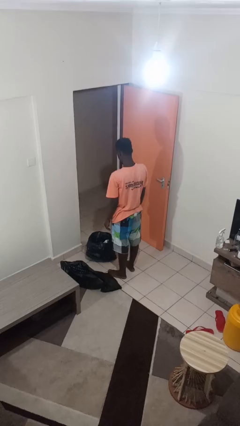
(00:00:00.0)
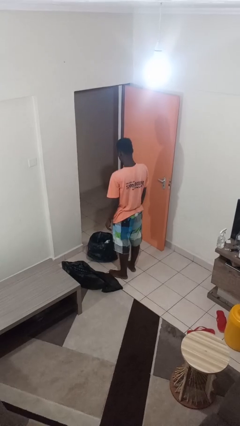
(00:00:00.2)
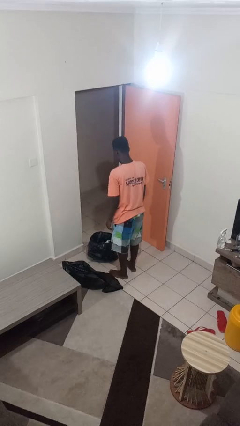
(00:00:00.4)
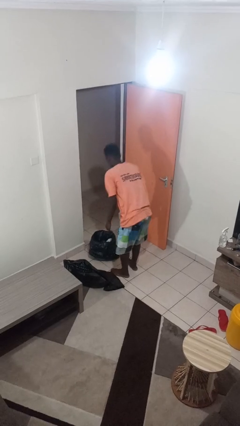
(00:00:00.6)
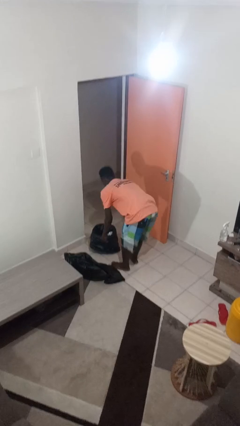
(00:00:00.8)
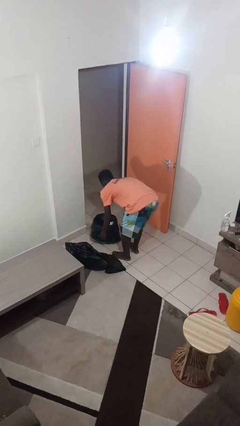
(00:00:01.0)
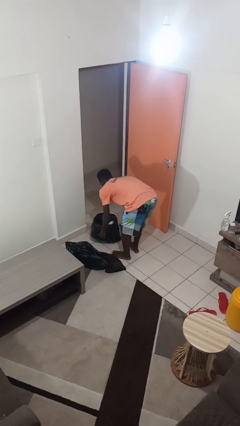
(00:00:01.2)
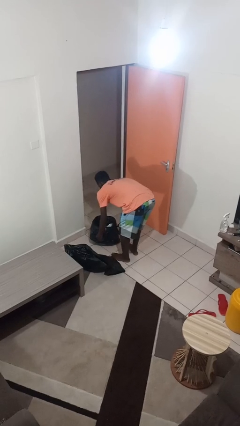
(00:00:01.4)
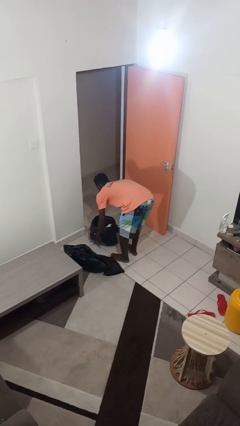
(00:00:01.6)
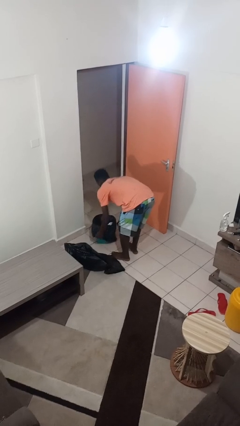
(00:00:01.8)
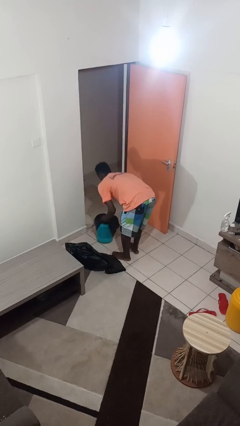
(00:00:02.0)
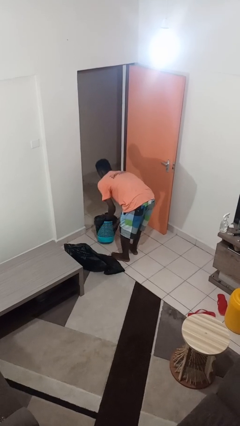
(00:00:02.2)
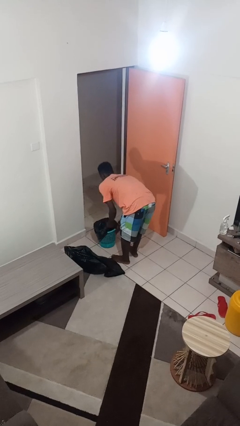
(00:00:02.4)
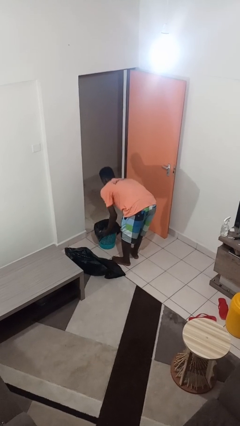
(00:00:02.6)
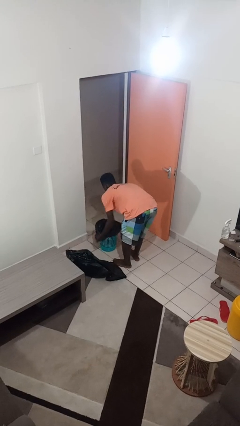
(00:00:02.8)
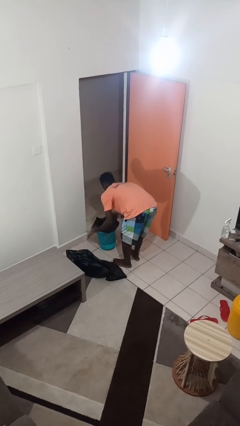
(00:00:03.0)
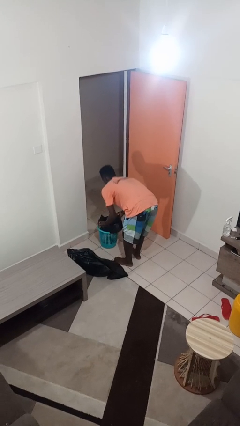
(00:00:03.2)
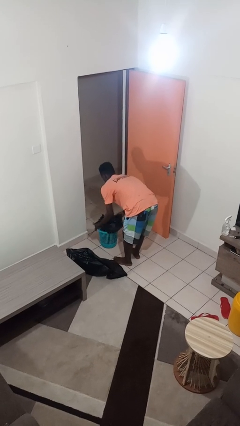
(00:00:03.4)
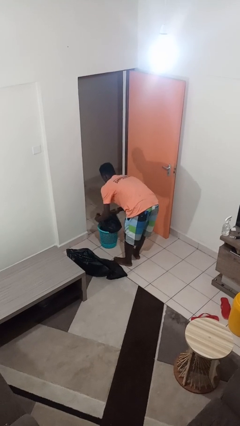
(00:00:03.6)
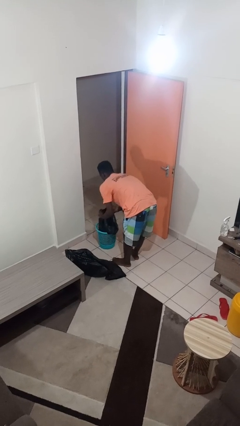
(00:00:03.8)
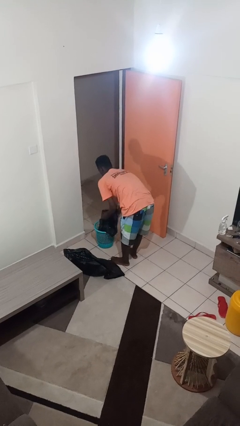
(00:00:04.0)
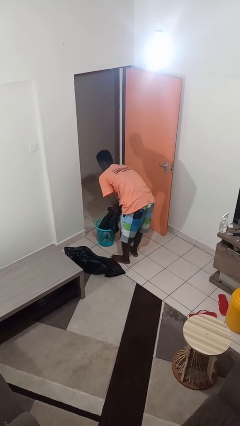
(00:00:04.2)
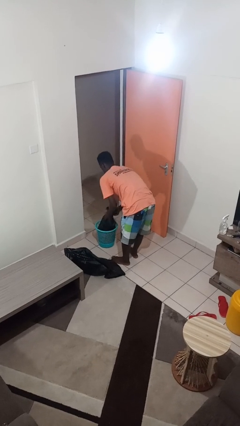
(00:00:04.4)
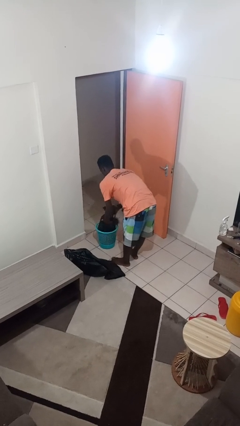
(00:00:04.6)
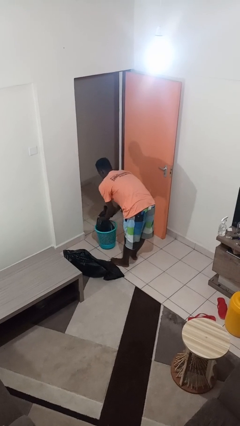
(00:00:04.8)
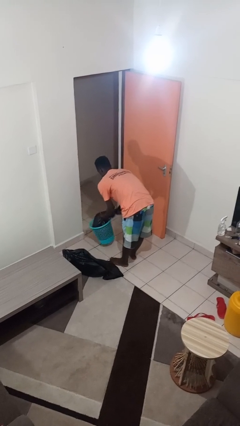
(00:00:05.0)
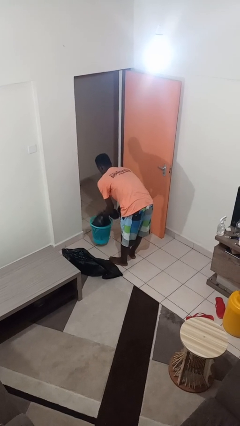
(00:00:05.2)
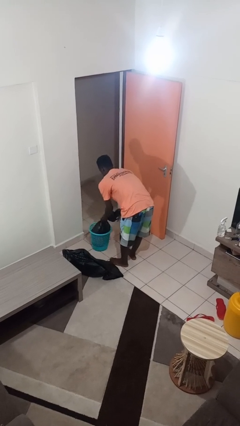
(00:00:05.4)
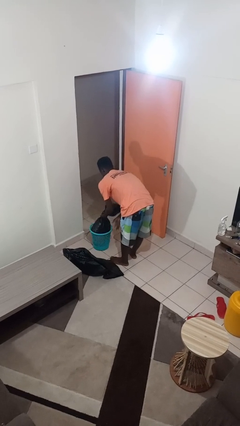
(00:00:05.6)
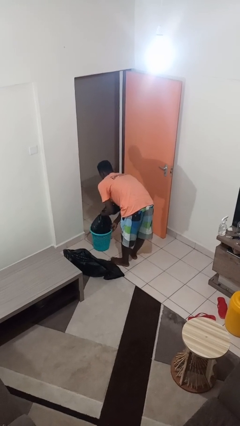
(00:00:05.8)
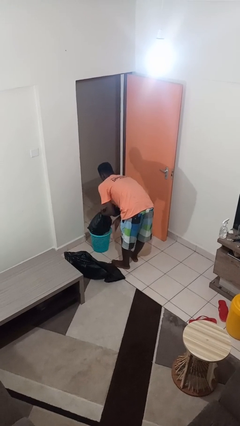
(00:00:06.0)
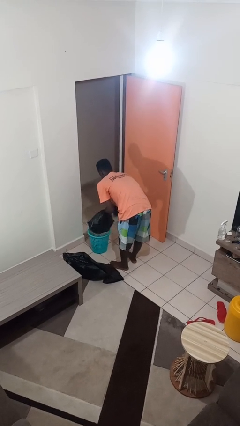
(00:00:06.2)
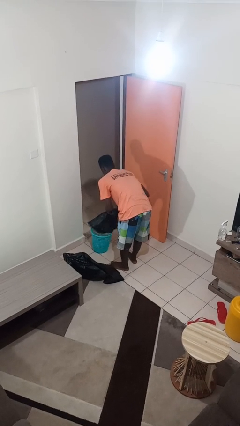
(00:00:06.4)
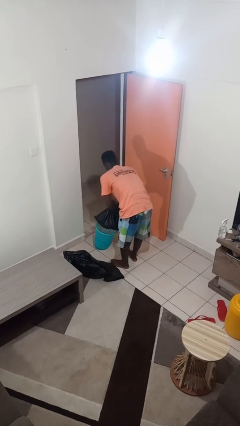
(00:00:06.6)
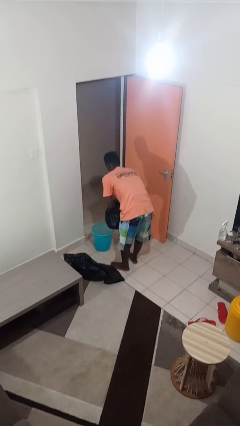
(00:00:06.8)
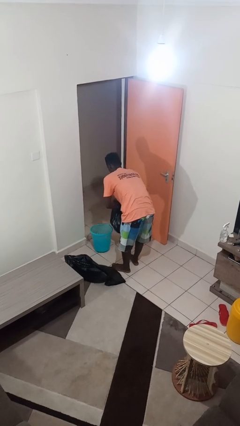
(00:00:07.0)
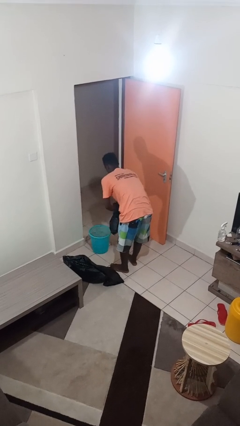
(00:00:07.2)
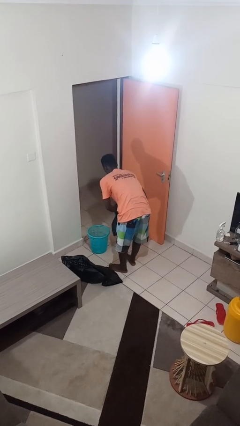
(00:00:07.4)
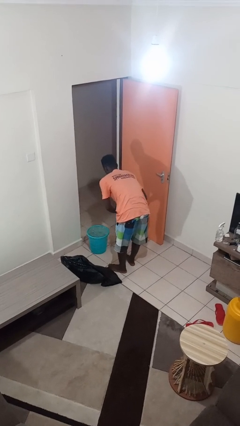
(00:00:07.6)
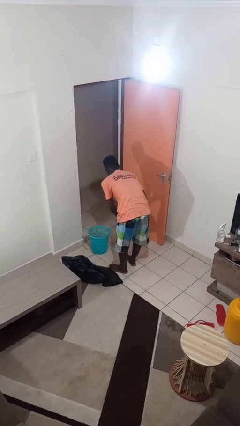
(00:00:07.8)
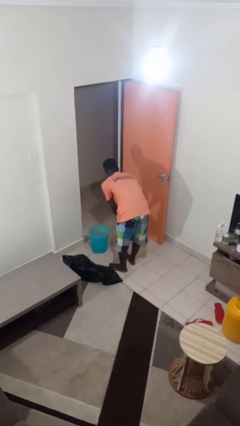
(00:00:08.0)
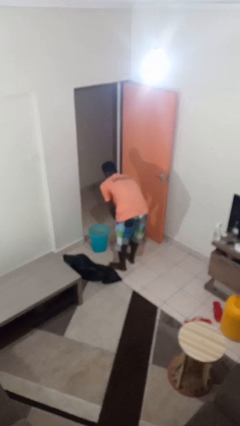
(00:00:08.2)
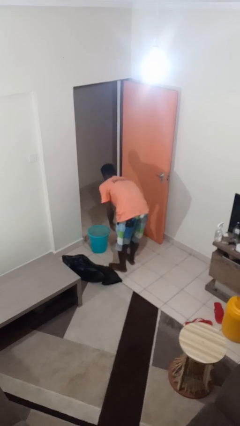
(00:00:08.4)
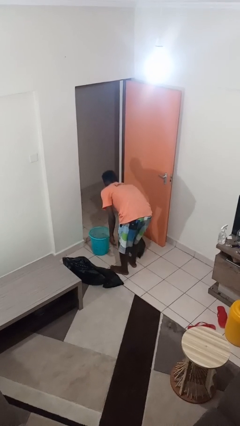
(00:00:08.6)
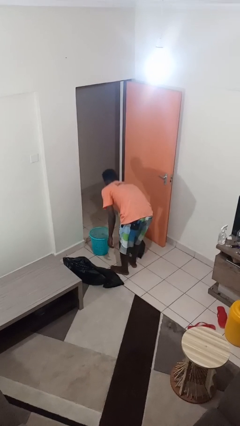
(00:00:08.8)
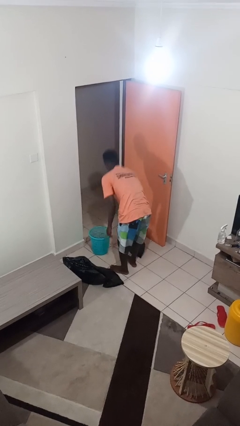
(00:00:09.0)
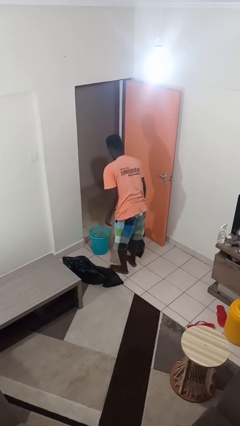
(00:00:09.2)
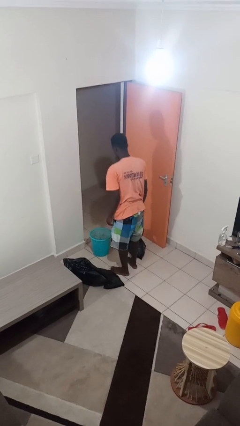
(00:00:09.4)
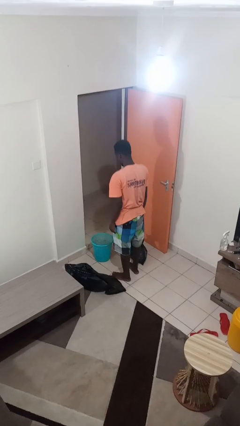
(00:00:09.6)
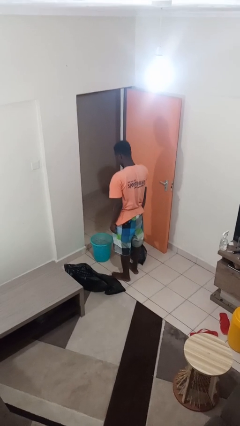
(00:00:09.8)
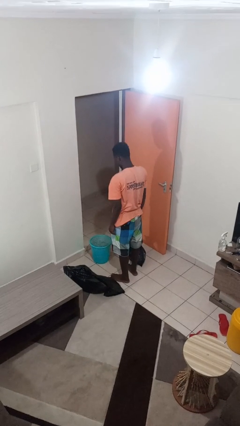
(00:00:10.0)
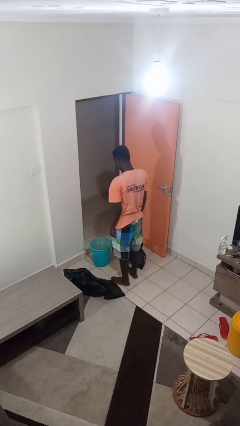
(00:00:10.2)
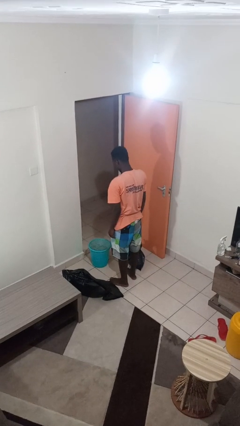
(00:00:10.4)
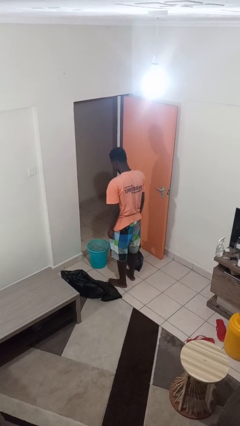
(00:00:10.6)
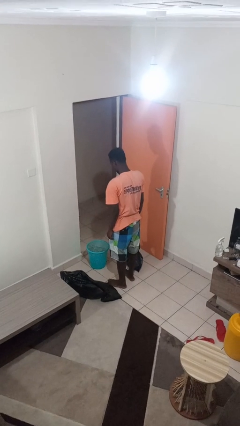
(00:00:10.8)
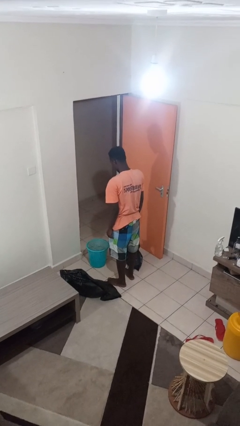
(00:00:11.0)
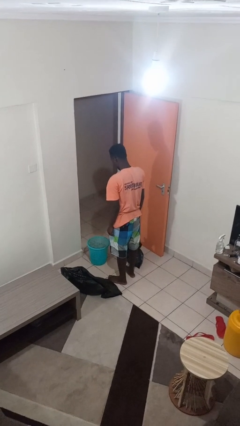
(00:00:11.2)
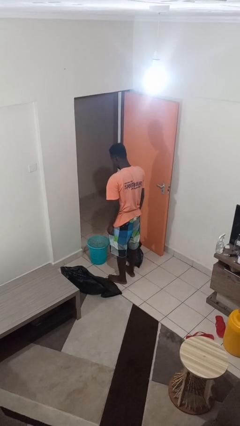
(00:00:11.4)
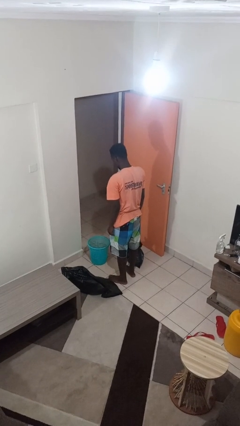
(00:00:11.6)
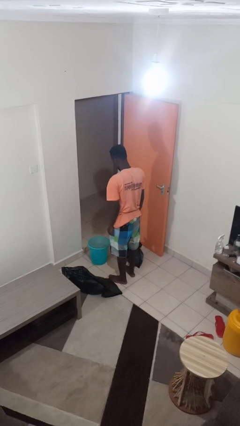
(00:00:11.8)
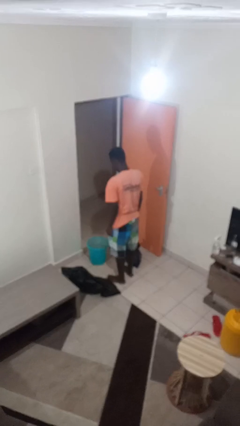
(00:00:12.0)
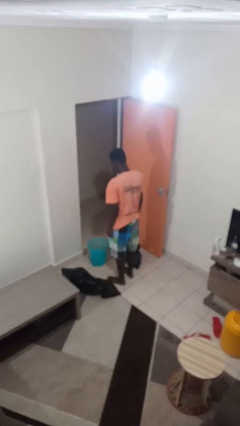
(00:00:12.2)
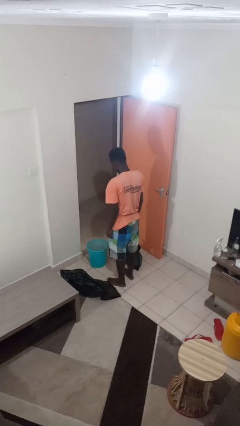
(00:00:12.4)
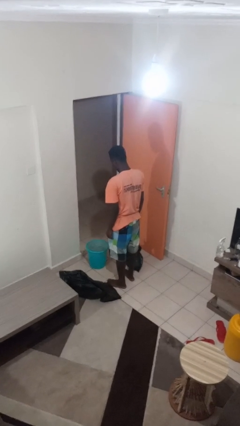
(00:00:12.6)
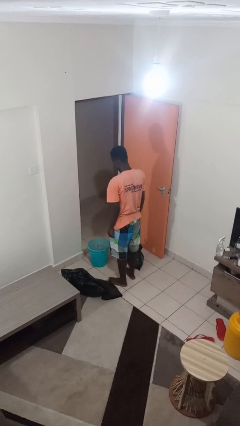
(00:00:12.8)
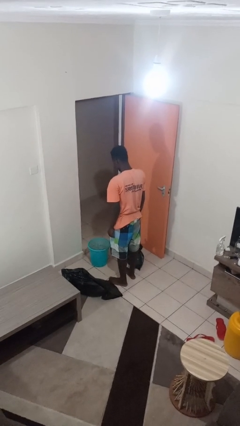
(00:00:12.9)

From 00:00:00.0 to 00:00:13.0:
person removes trashbag from trashcan

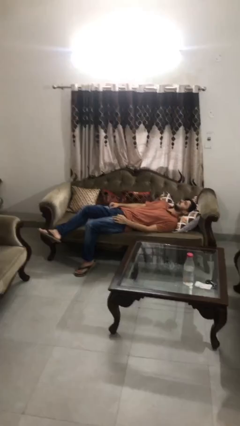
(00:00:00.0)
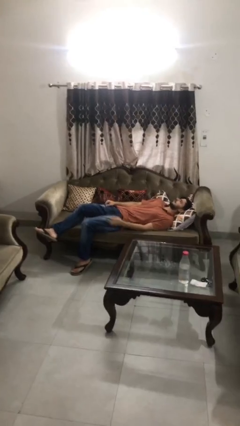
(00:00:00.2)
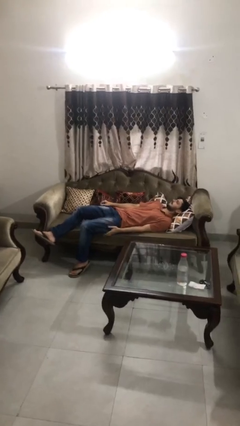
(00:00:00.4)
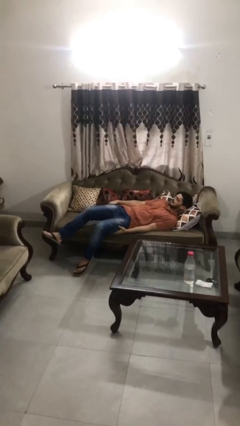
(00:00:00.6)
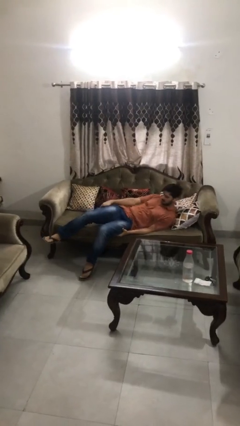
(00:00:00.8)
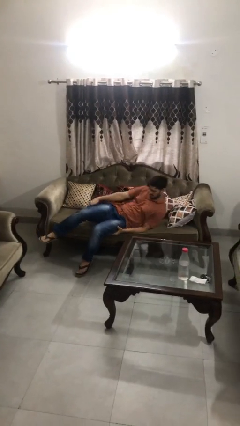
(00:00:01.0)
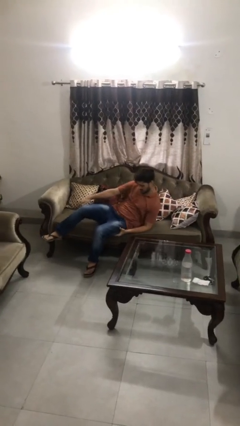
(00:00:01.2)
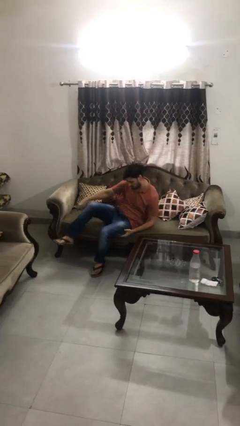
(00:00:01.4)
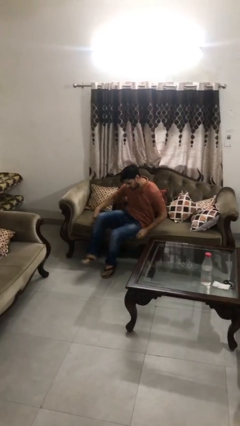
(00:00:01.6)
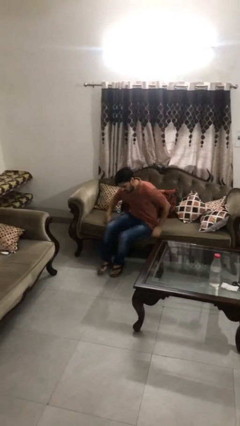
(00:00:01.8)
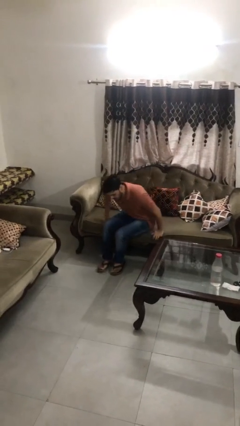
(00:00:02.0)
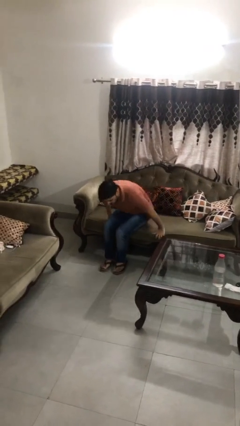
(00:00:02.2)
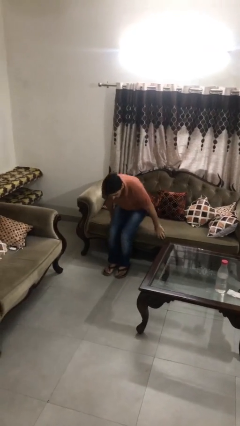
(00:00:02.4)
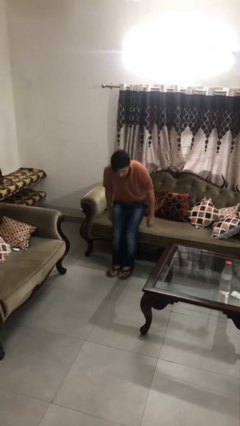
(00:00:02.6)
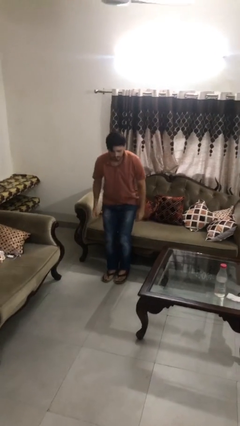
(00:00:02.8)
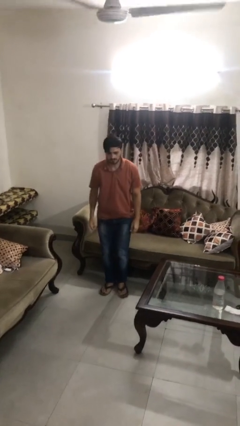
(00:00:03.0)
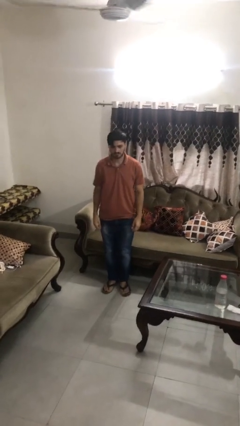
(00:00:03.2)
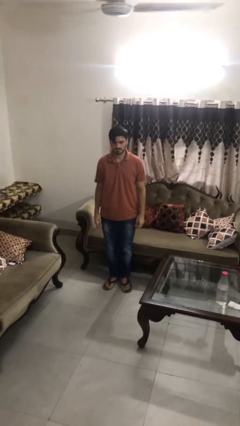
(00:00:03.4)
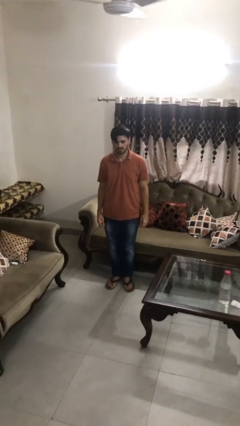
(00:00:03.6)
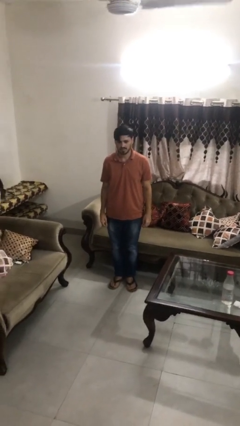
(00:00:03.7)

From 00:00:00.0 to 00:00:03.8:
person stands up

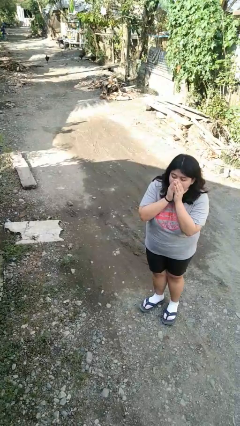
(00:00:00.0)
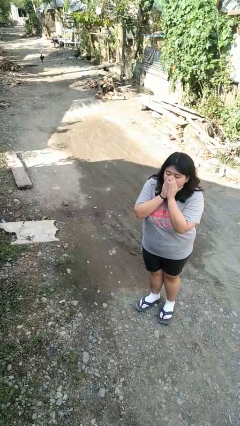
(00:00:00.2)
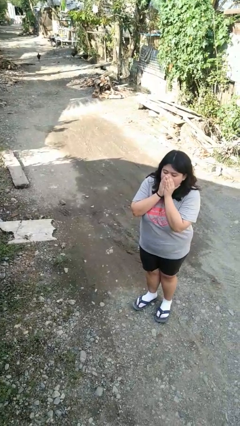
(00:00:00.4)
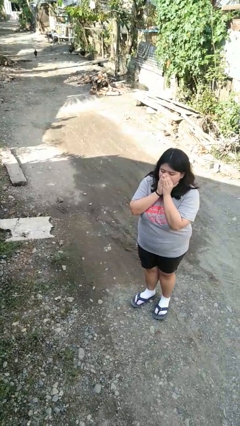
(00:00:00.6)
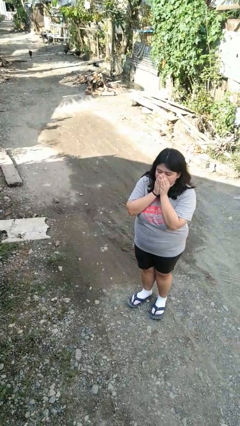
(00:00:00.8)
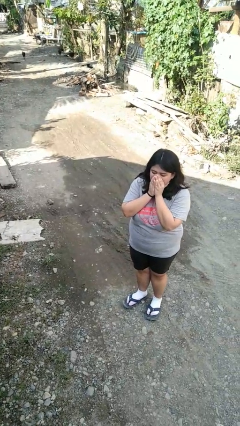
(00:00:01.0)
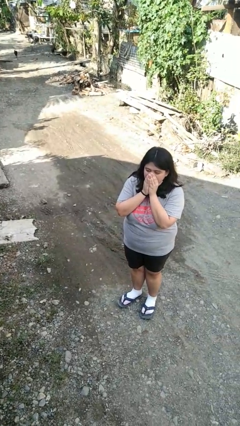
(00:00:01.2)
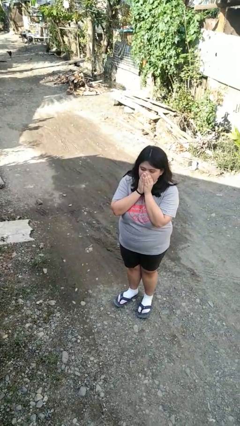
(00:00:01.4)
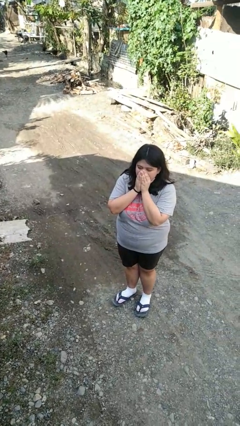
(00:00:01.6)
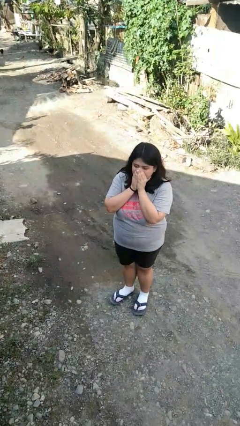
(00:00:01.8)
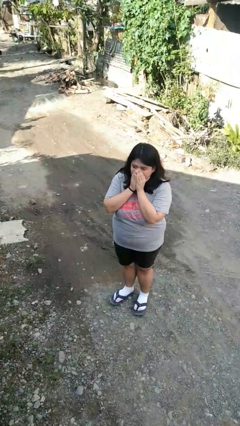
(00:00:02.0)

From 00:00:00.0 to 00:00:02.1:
person blows into hands
